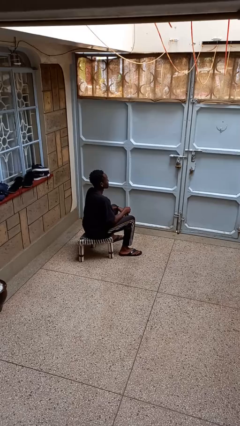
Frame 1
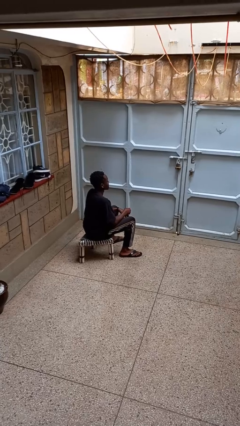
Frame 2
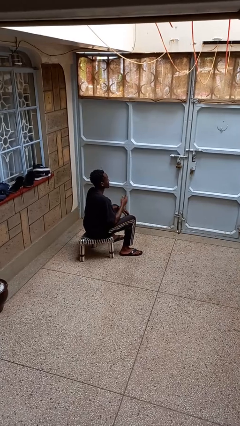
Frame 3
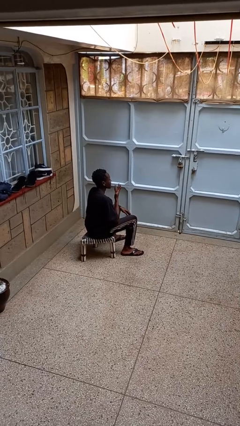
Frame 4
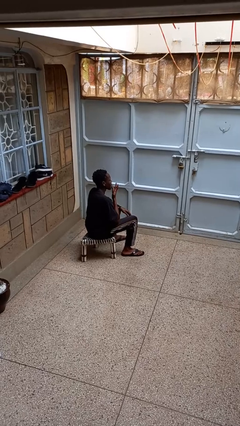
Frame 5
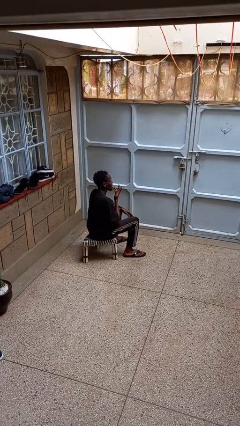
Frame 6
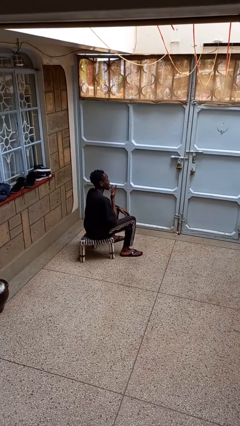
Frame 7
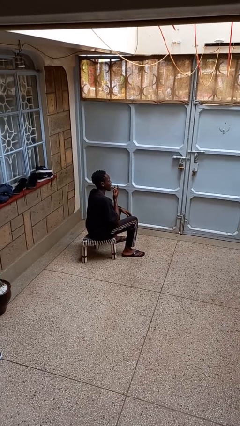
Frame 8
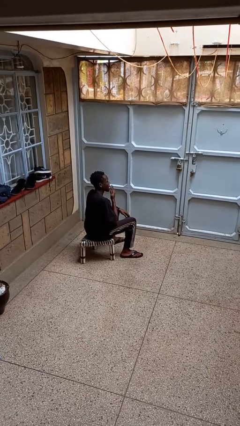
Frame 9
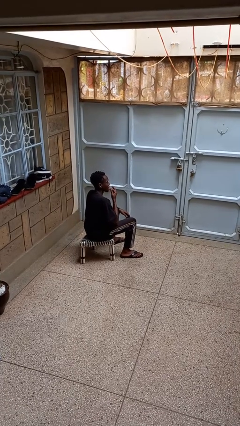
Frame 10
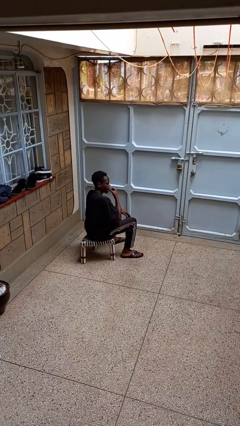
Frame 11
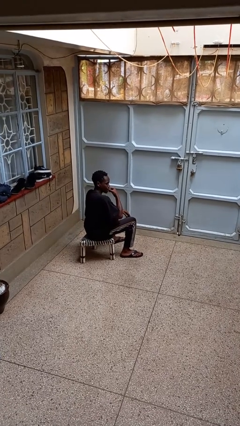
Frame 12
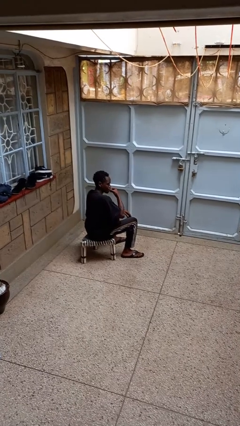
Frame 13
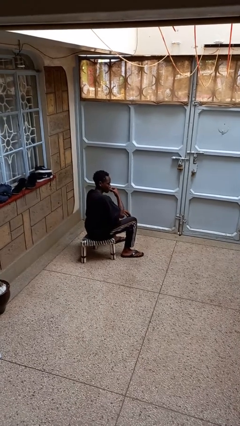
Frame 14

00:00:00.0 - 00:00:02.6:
person licks fingers

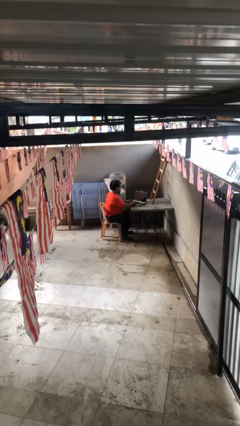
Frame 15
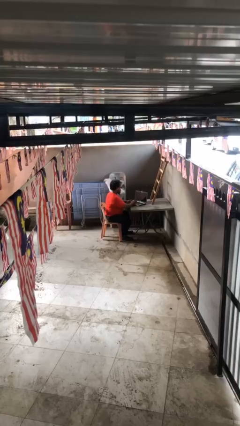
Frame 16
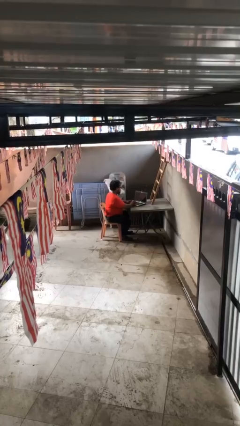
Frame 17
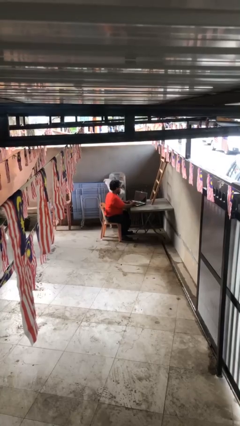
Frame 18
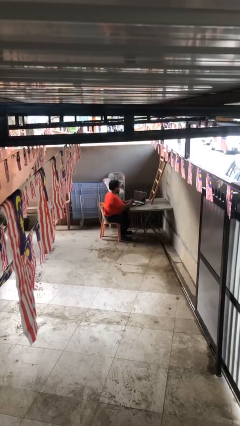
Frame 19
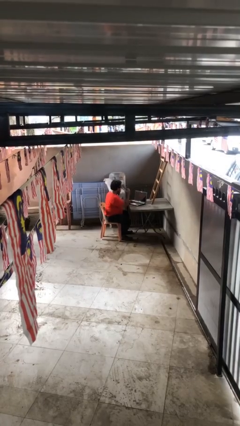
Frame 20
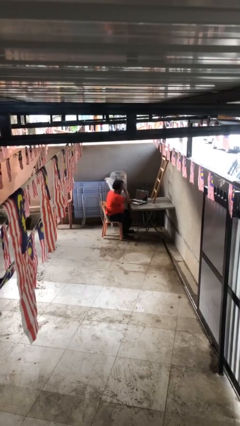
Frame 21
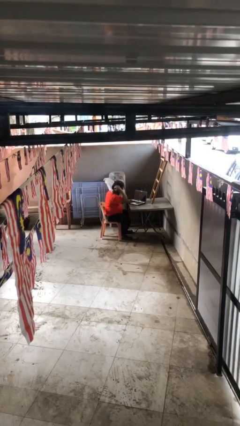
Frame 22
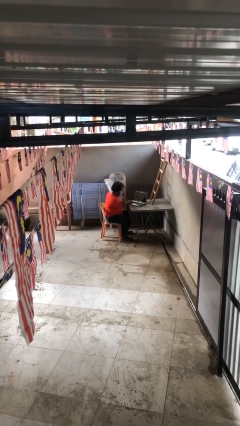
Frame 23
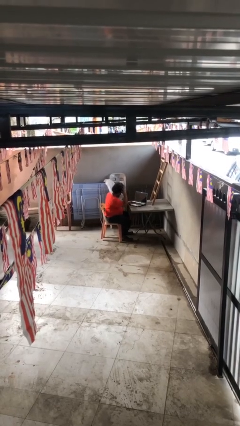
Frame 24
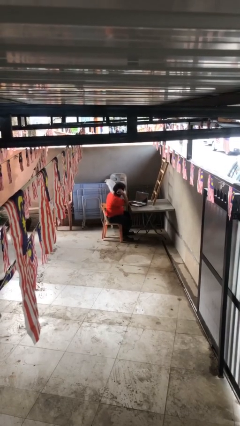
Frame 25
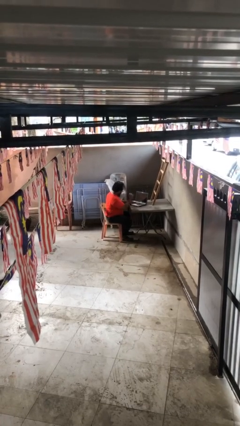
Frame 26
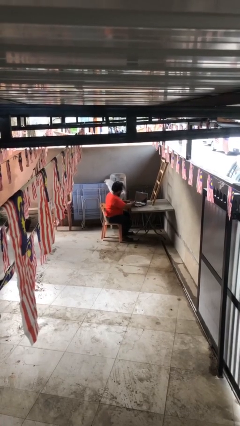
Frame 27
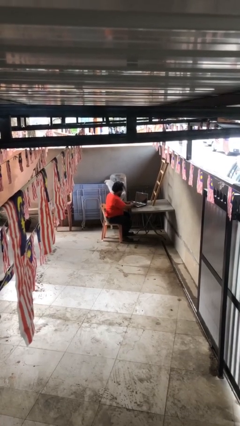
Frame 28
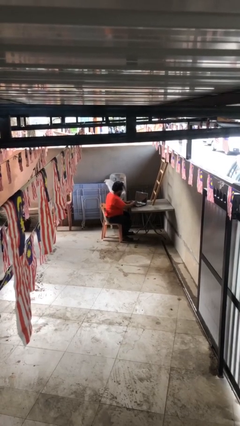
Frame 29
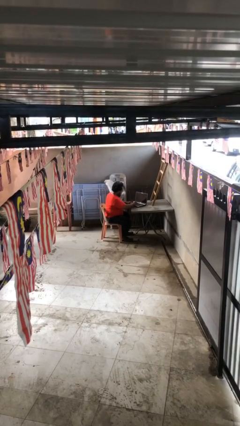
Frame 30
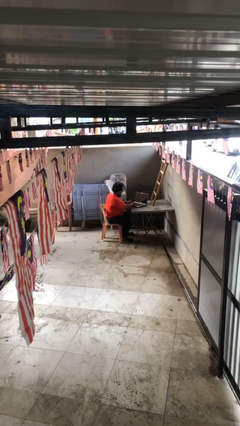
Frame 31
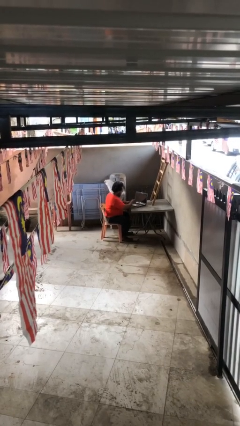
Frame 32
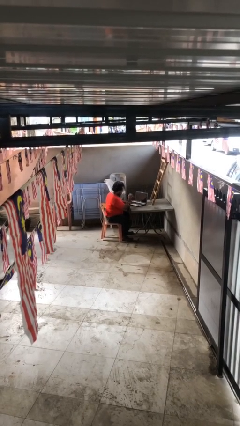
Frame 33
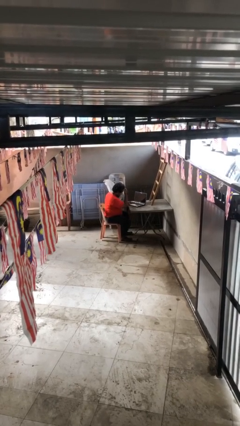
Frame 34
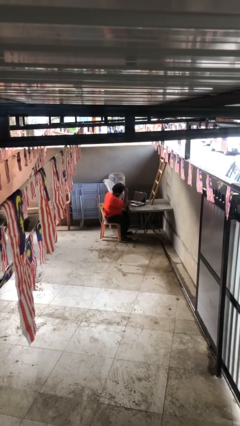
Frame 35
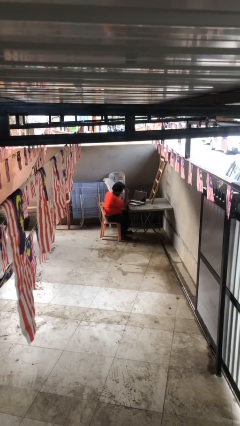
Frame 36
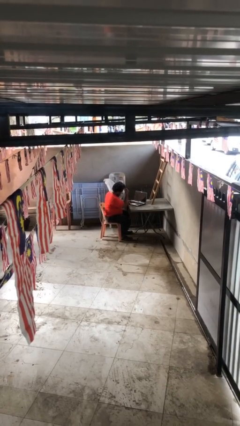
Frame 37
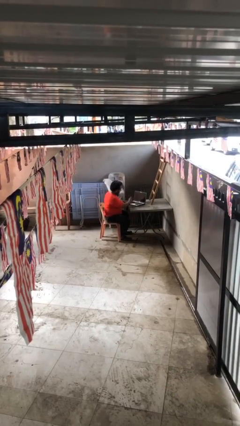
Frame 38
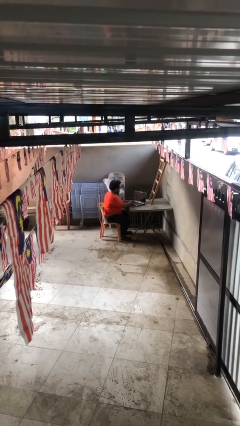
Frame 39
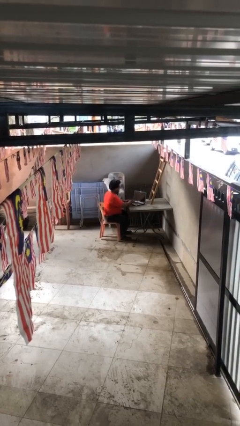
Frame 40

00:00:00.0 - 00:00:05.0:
person interacts with laptop

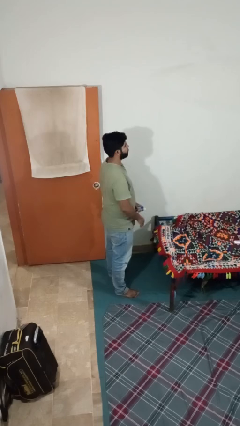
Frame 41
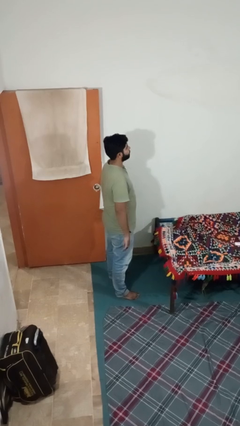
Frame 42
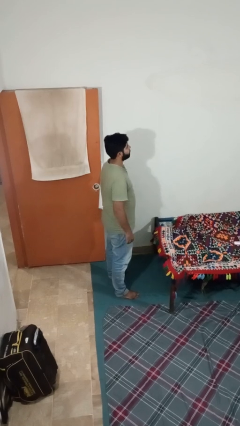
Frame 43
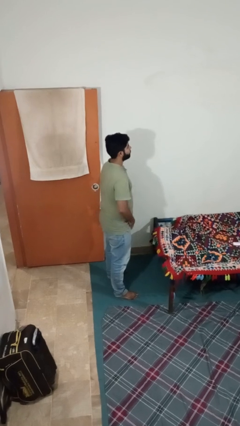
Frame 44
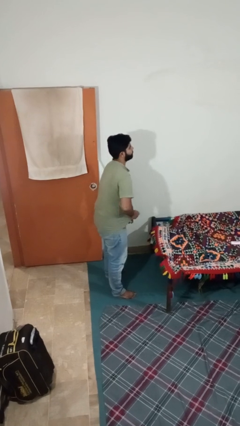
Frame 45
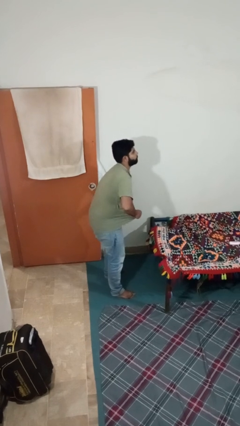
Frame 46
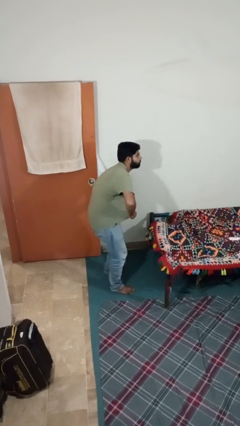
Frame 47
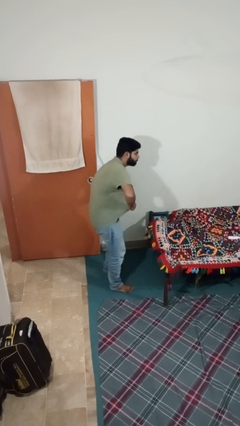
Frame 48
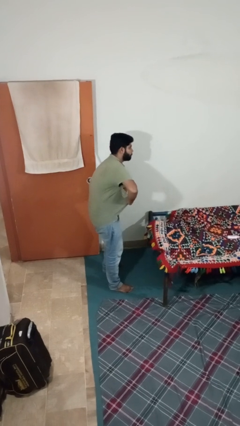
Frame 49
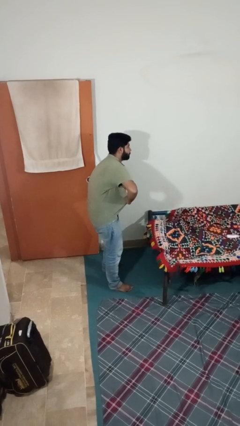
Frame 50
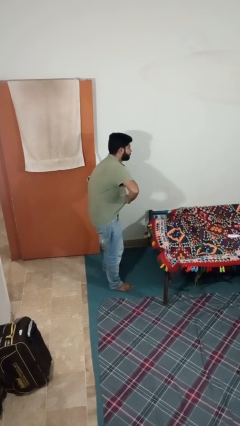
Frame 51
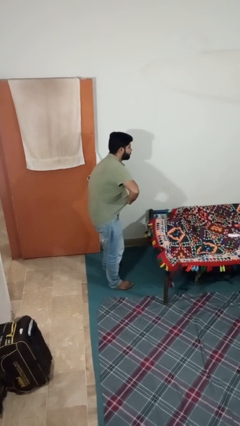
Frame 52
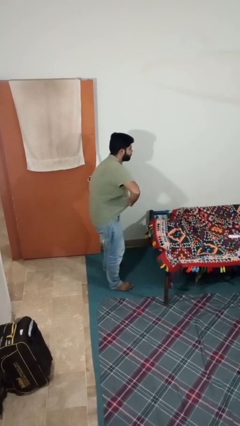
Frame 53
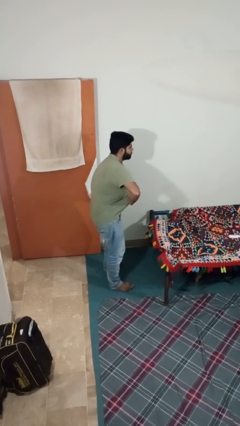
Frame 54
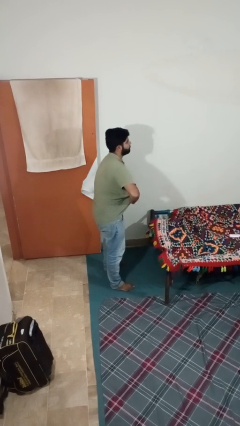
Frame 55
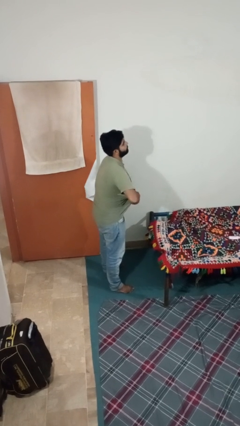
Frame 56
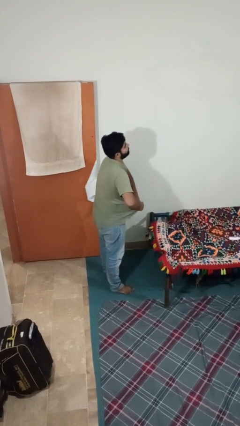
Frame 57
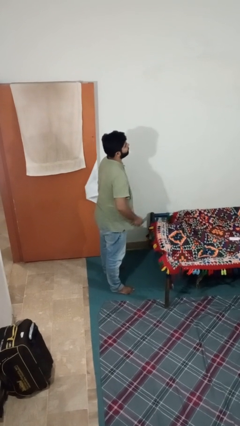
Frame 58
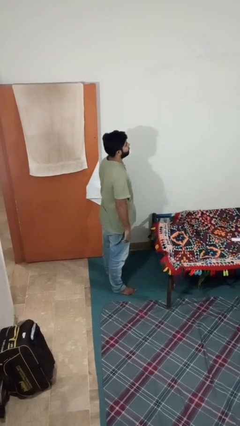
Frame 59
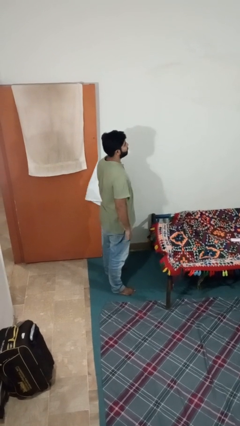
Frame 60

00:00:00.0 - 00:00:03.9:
person applies deodorant

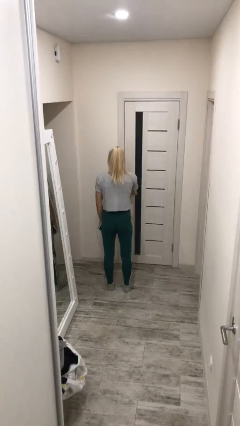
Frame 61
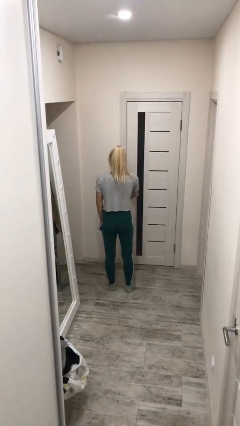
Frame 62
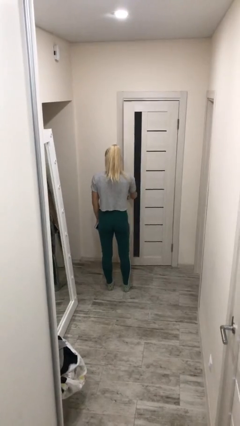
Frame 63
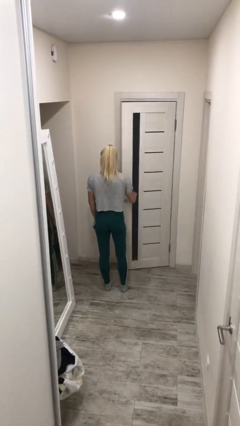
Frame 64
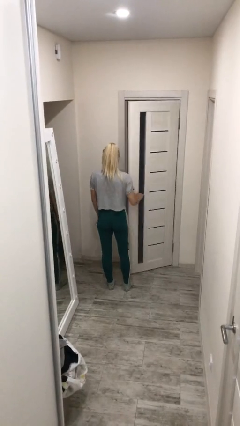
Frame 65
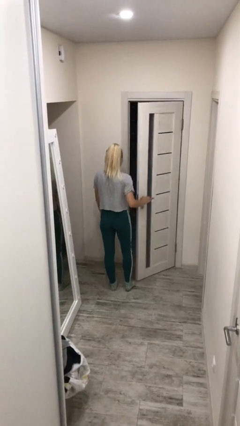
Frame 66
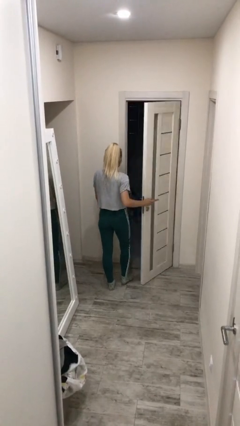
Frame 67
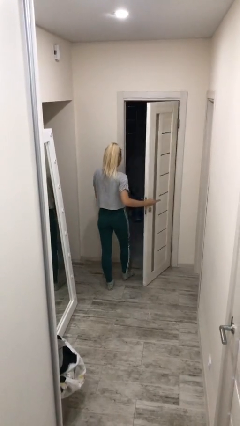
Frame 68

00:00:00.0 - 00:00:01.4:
person opens facility door

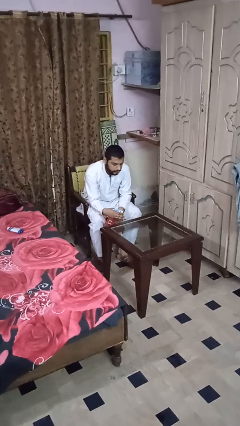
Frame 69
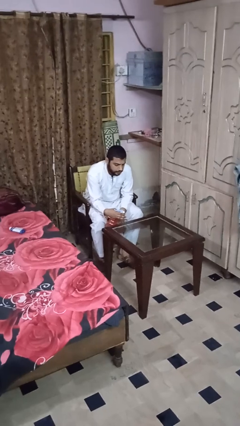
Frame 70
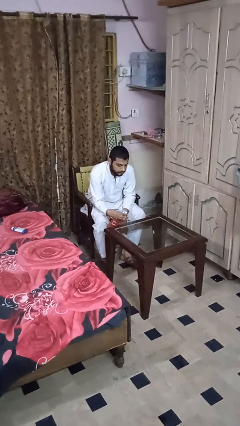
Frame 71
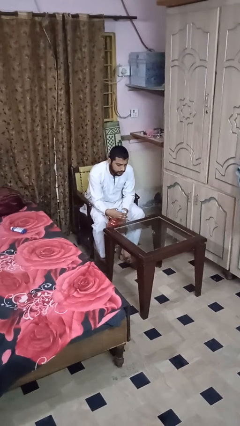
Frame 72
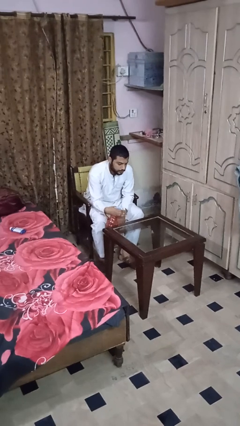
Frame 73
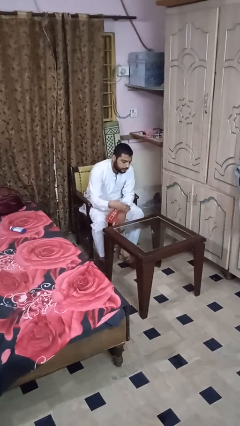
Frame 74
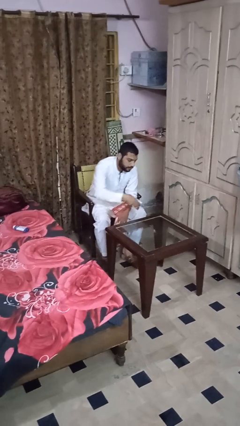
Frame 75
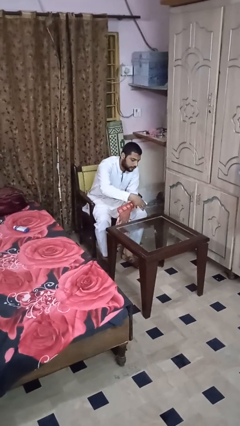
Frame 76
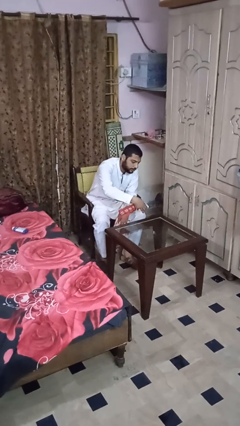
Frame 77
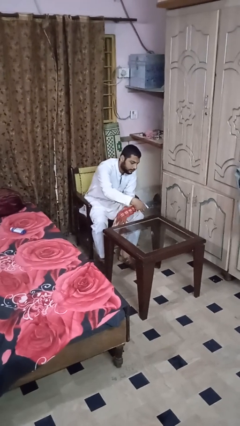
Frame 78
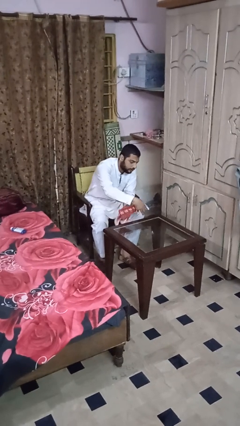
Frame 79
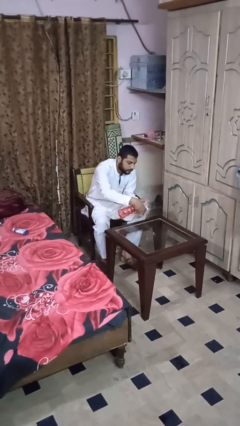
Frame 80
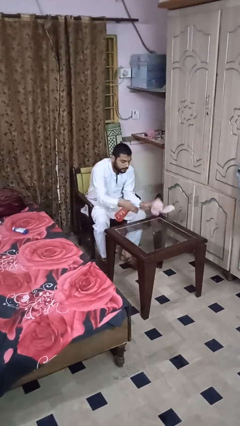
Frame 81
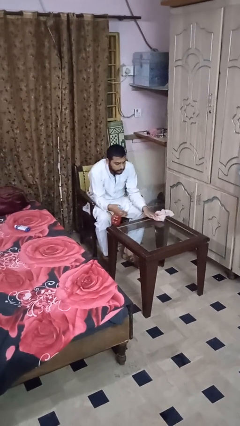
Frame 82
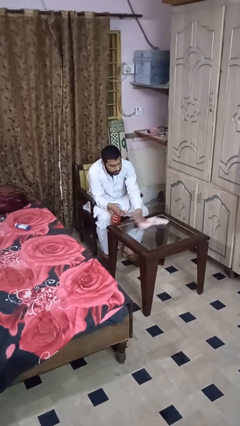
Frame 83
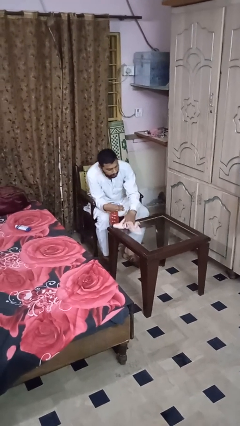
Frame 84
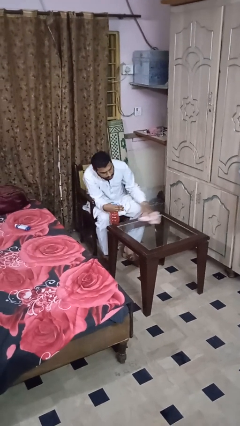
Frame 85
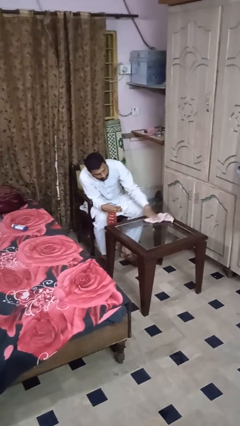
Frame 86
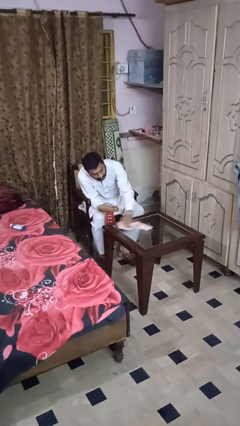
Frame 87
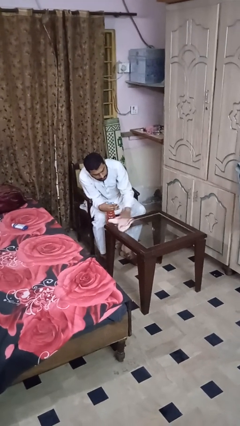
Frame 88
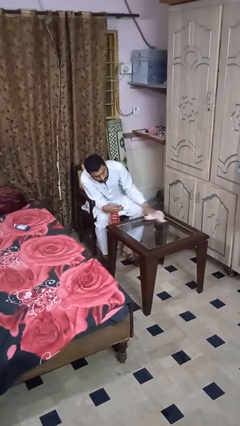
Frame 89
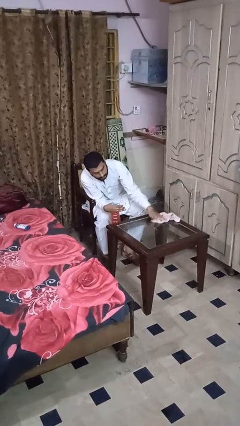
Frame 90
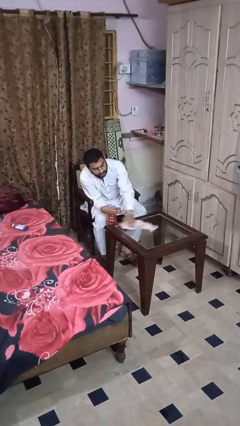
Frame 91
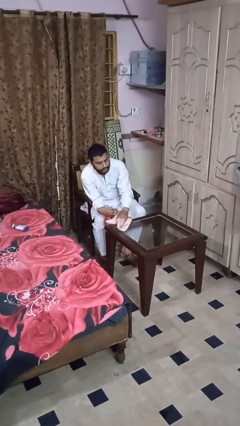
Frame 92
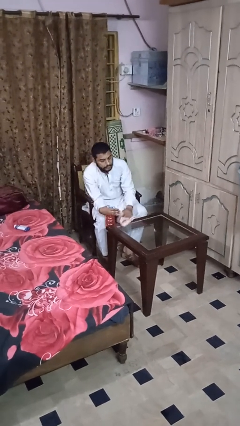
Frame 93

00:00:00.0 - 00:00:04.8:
person sprays from bottle

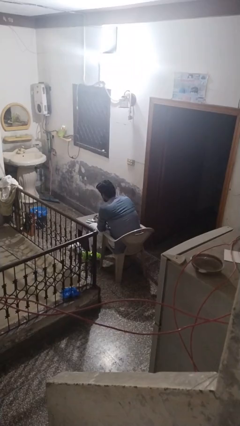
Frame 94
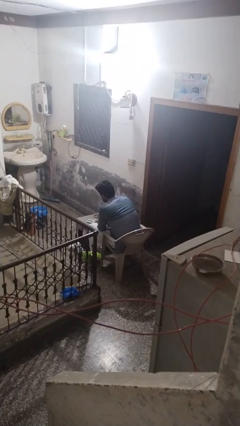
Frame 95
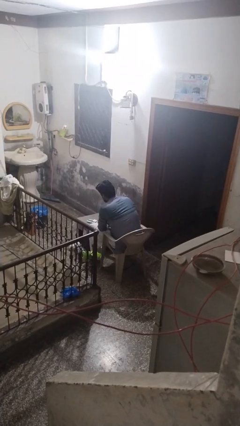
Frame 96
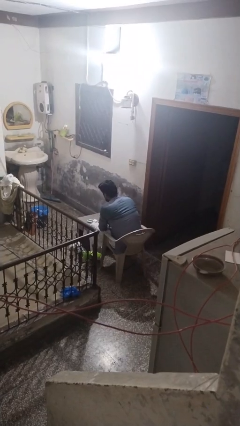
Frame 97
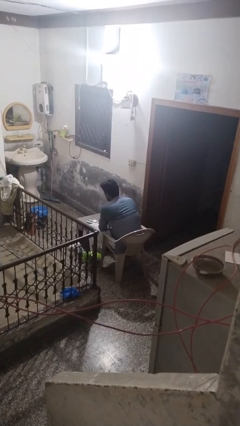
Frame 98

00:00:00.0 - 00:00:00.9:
person drinks from cup
